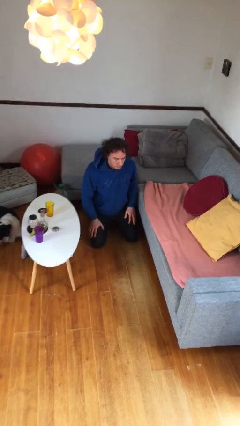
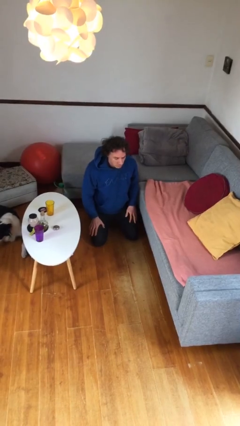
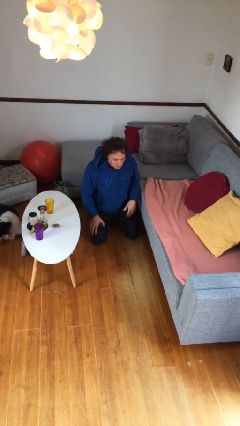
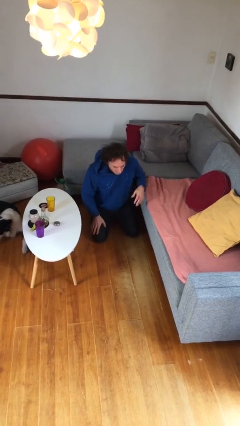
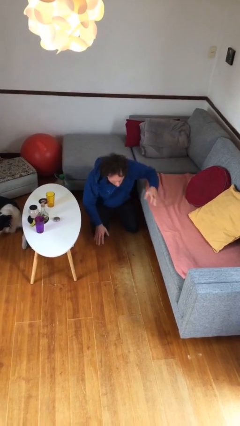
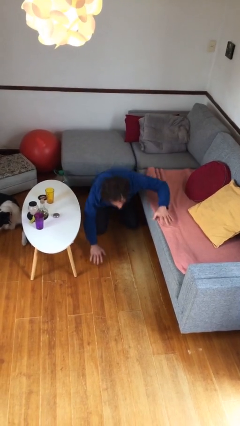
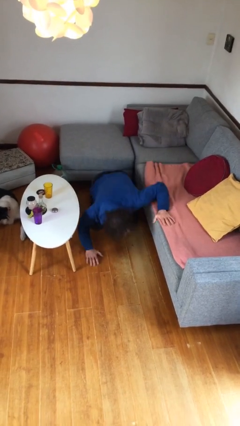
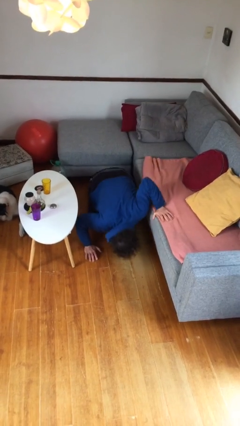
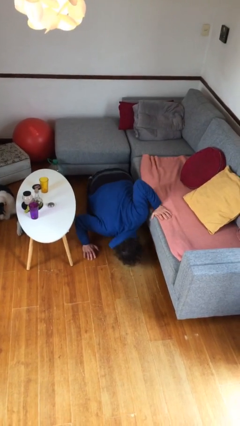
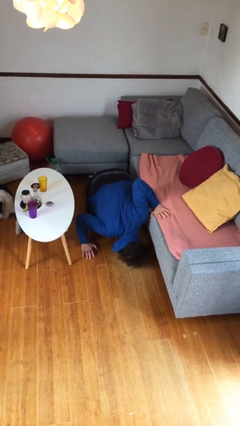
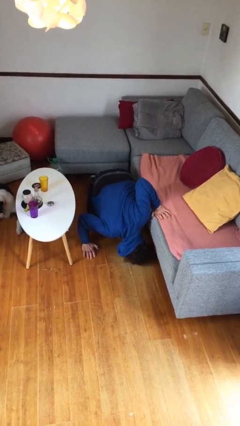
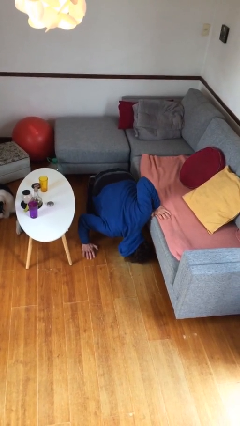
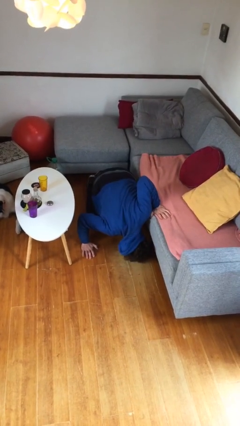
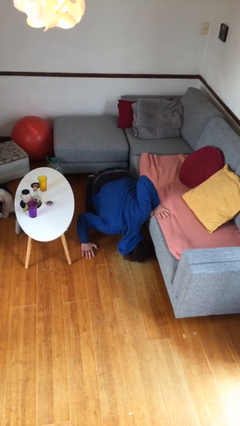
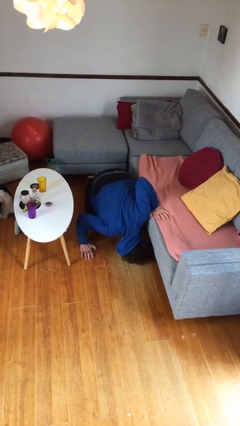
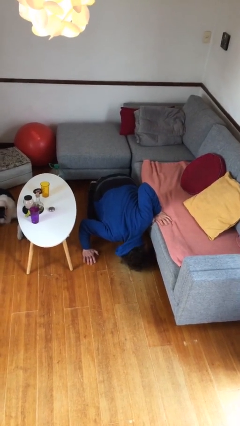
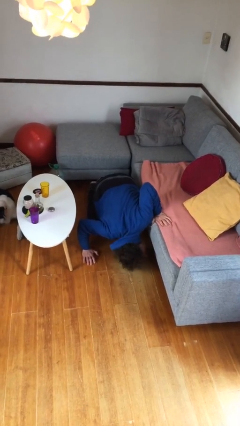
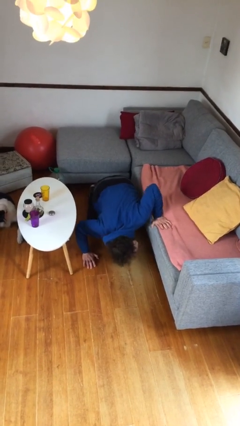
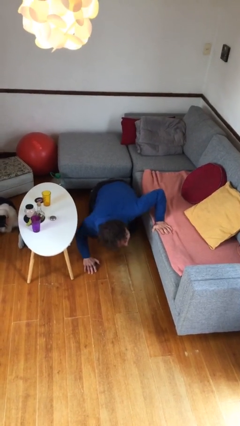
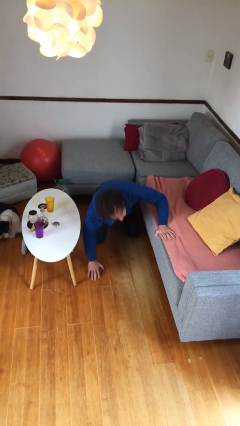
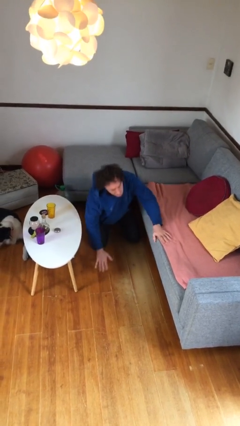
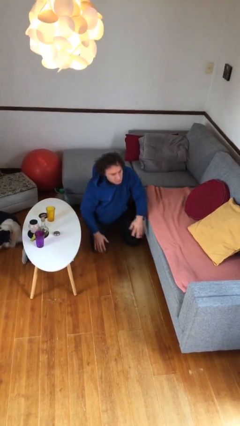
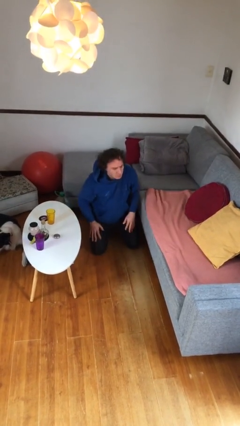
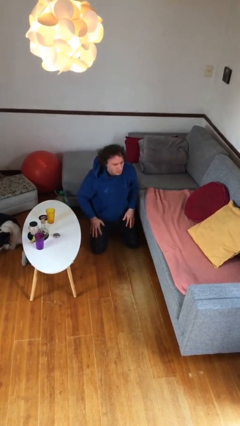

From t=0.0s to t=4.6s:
person searches under couch

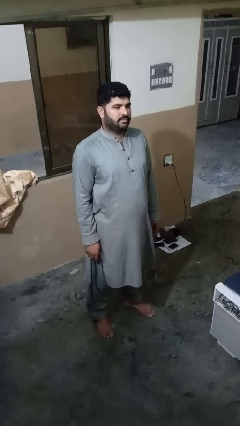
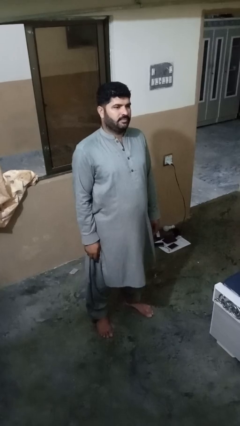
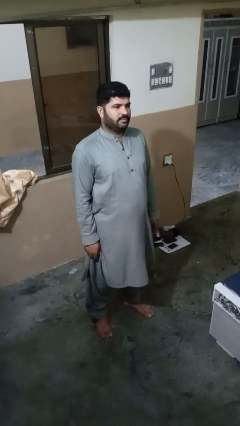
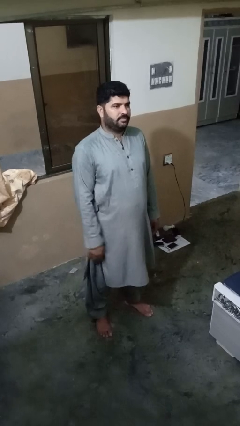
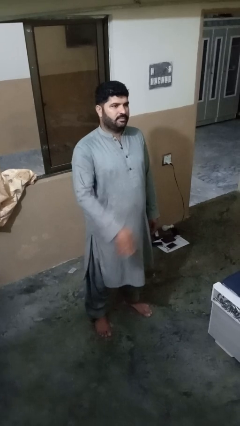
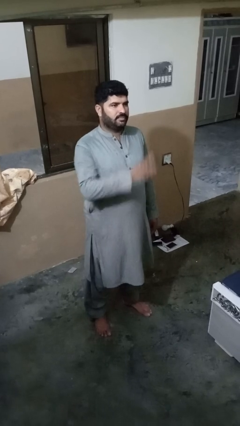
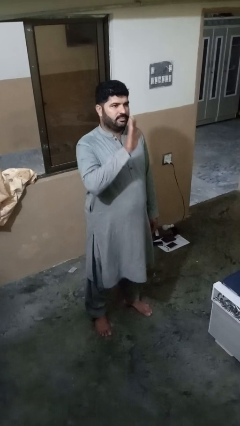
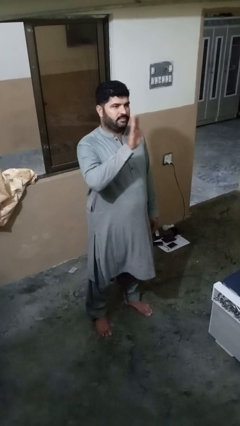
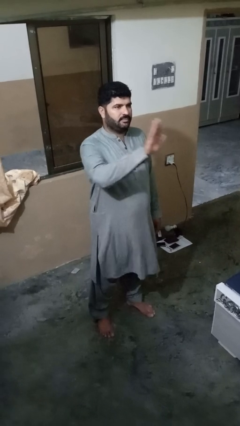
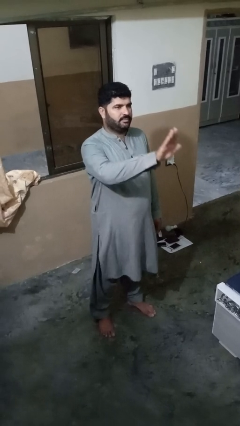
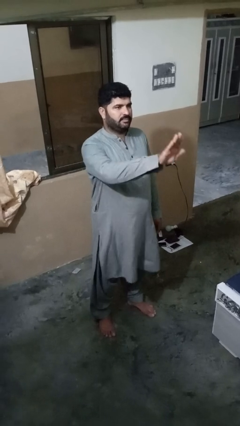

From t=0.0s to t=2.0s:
person gestures stop

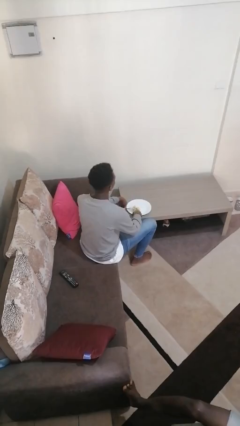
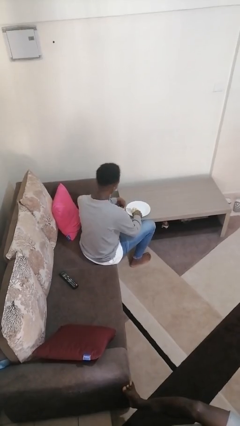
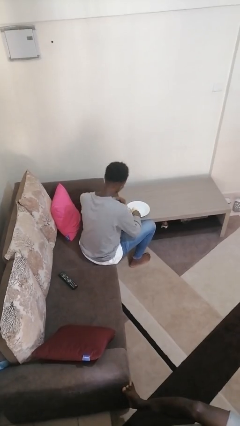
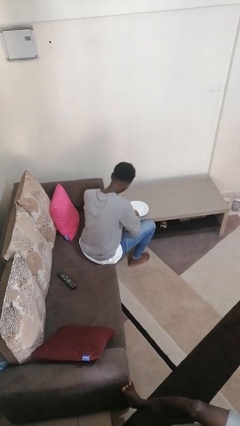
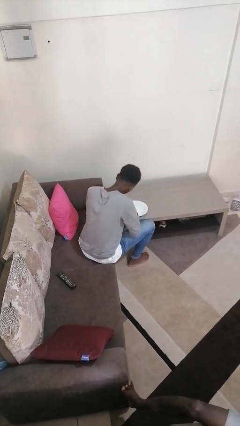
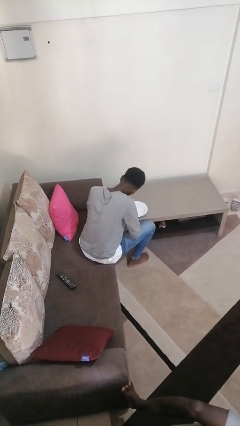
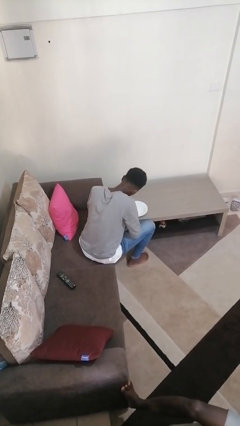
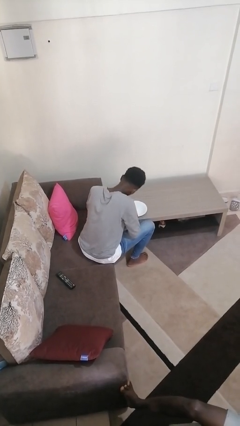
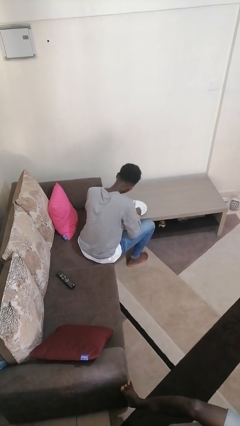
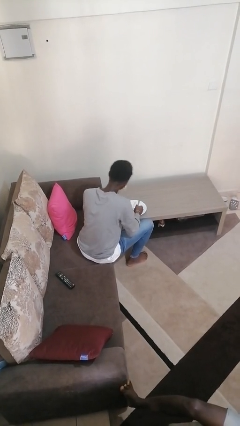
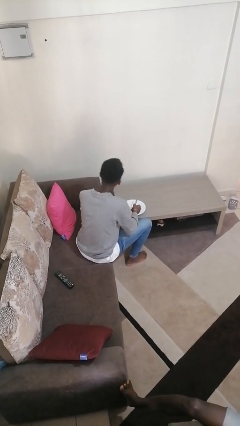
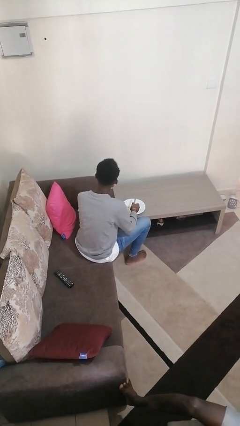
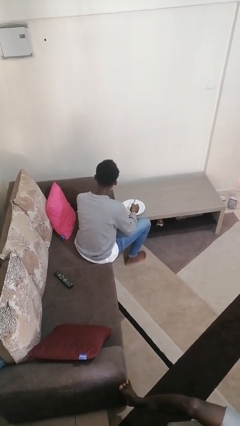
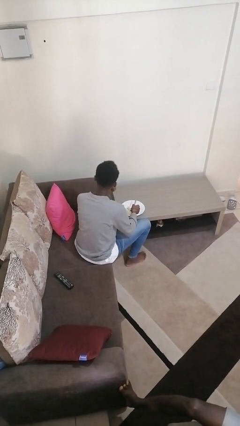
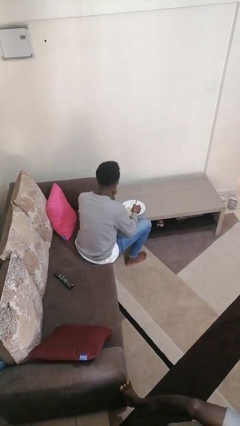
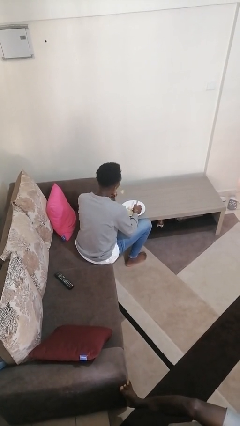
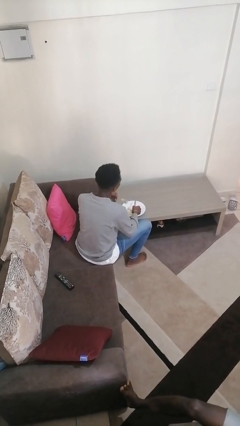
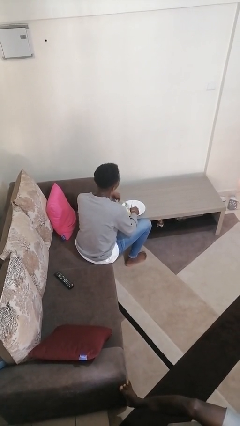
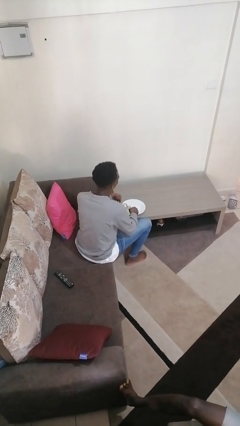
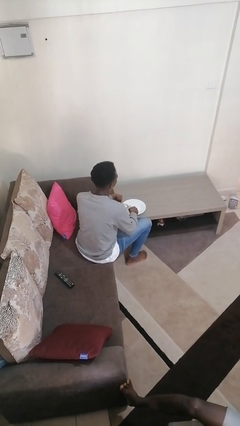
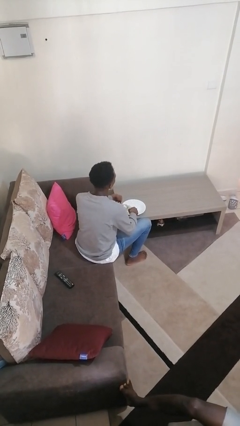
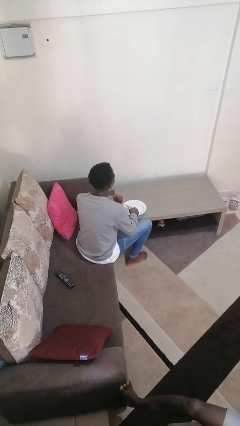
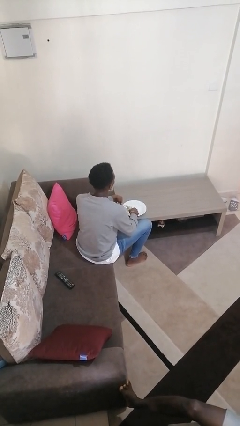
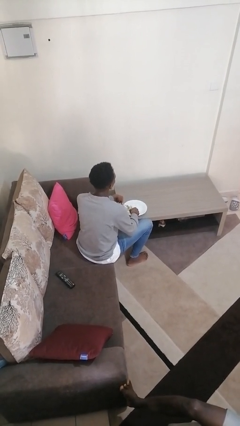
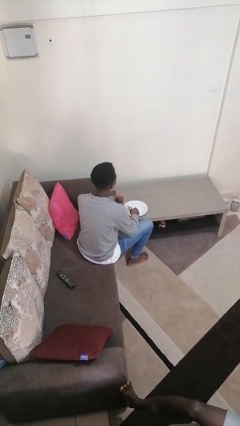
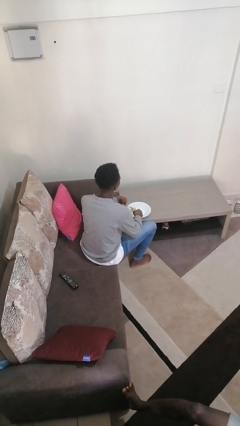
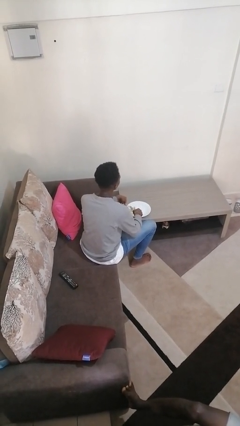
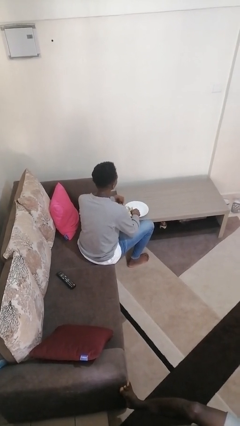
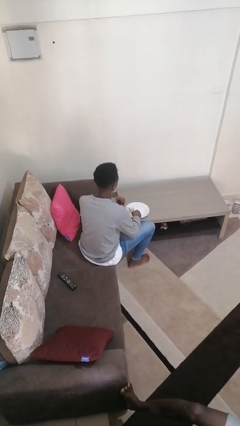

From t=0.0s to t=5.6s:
person eats with utensil

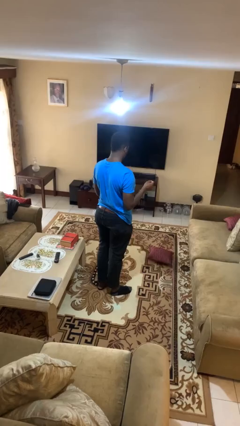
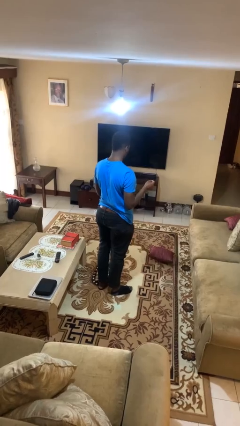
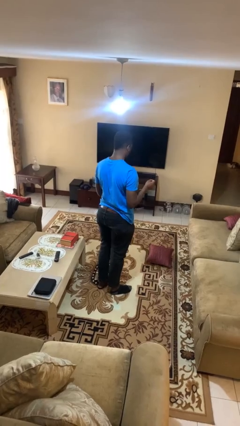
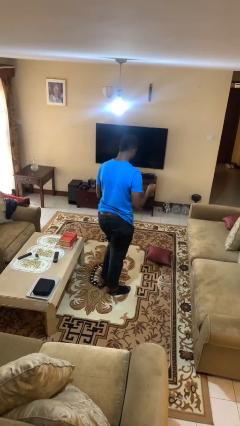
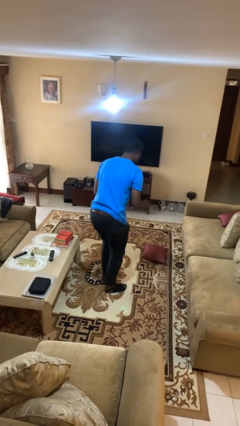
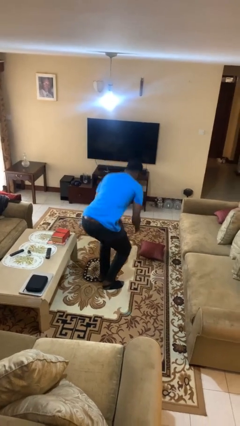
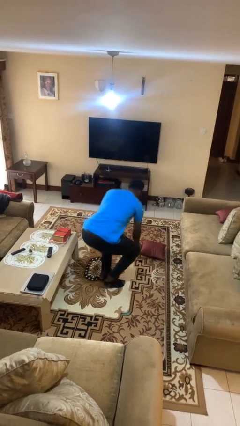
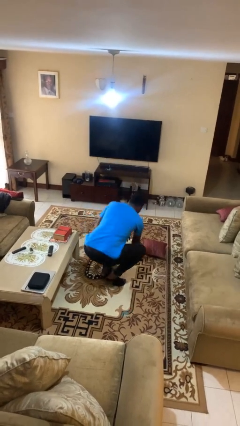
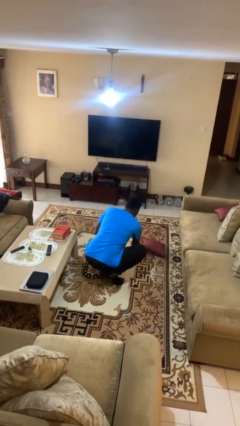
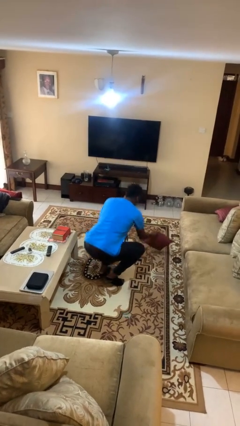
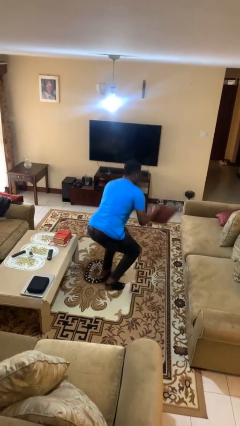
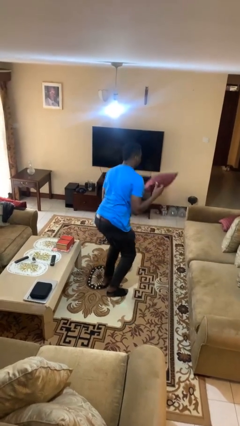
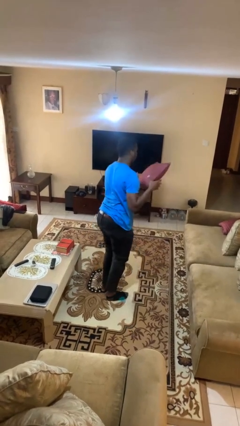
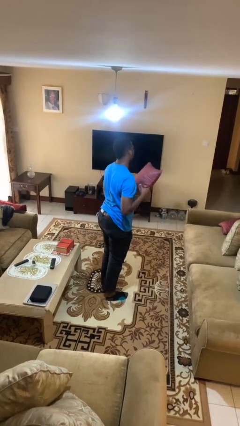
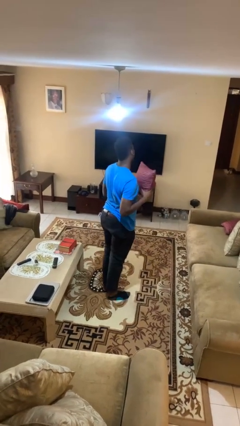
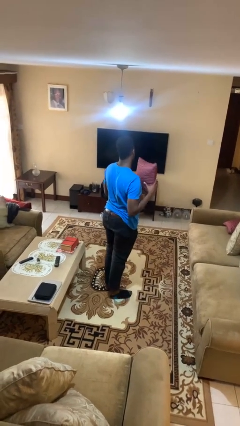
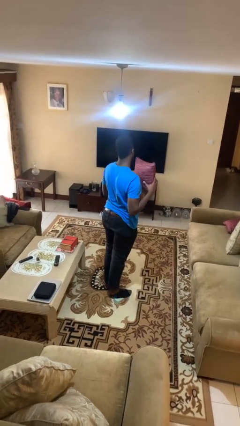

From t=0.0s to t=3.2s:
person picks up object from floor

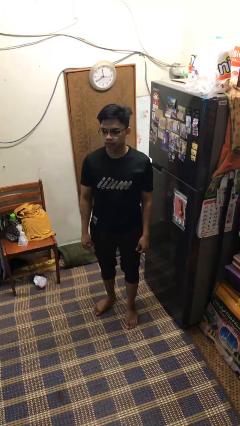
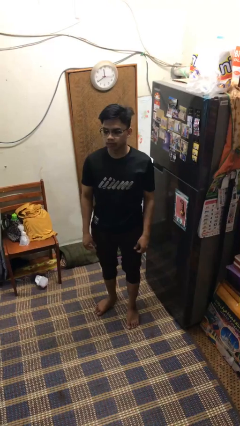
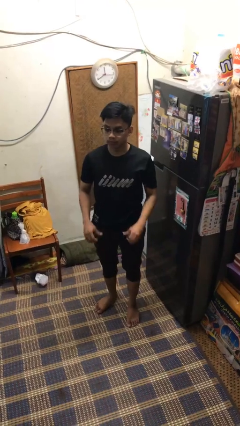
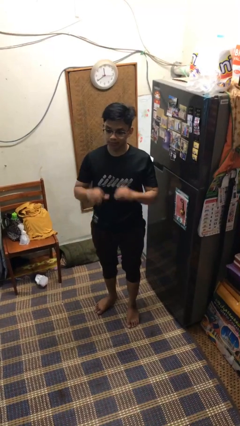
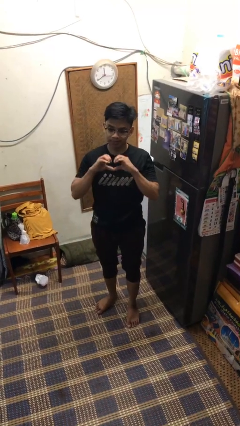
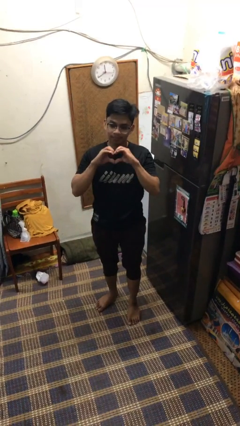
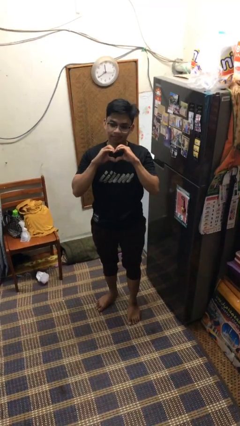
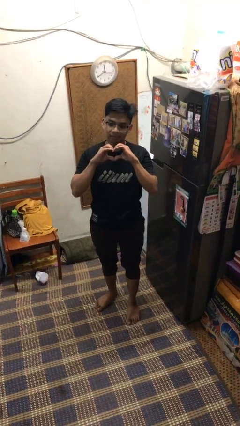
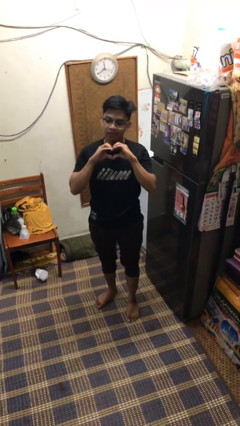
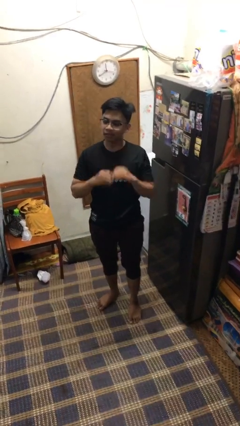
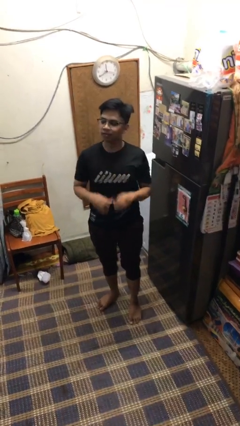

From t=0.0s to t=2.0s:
person gestures heart

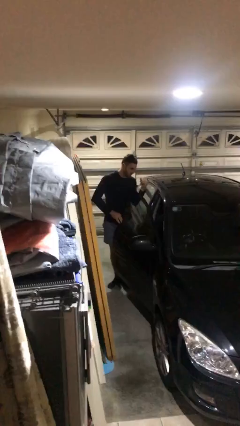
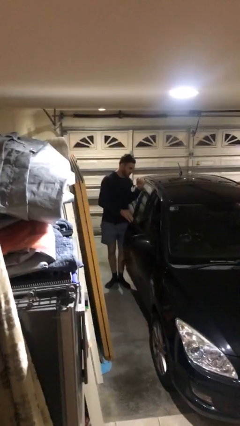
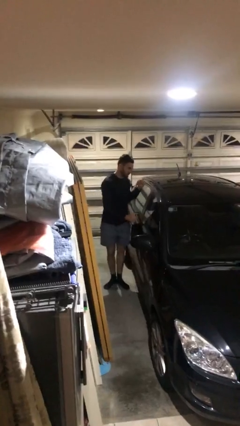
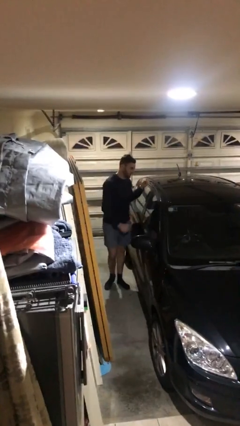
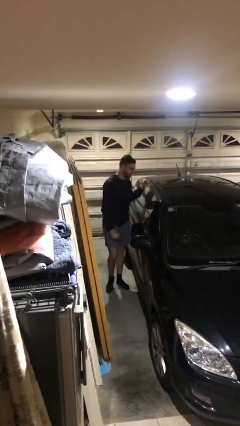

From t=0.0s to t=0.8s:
person closes car door
